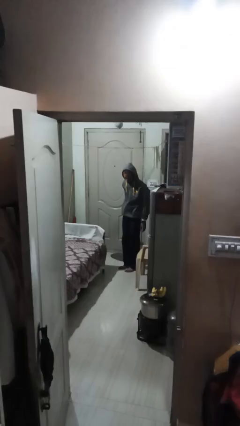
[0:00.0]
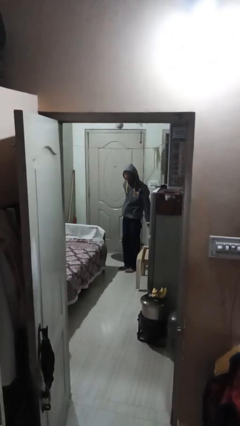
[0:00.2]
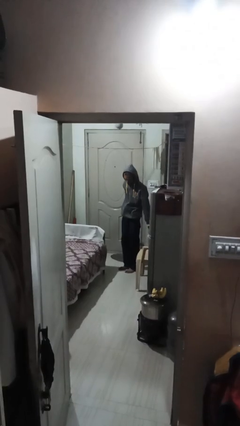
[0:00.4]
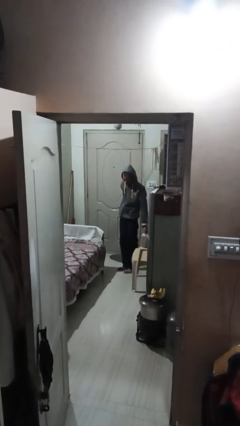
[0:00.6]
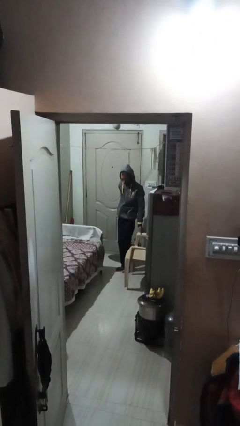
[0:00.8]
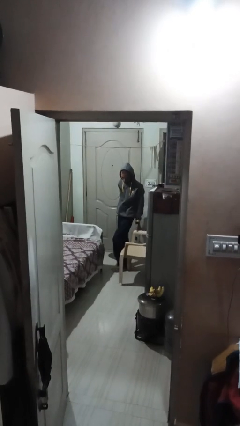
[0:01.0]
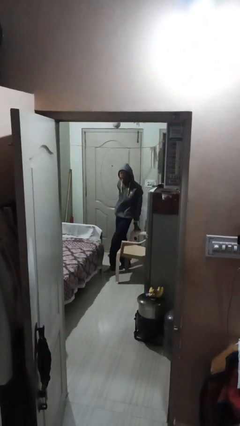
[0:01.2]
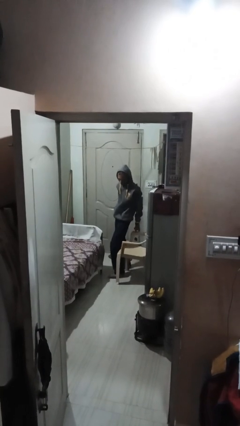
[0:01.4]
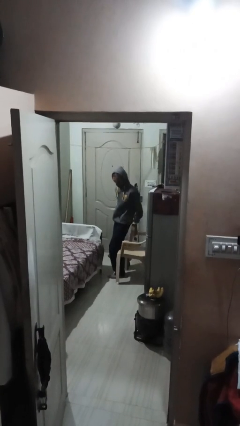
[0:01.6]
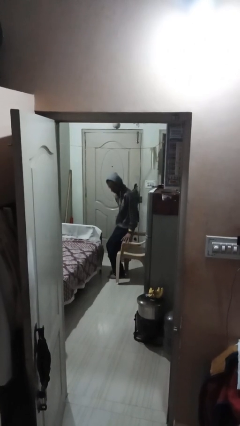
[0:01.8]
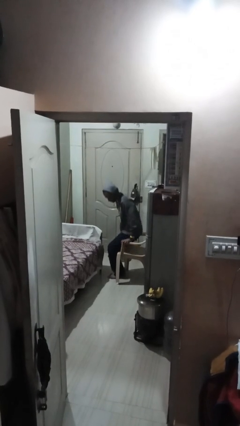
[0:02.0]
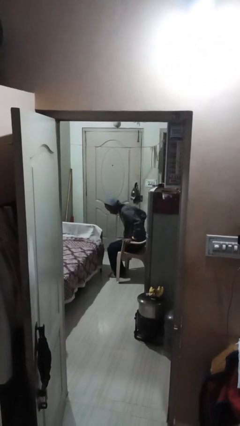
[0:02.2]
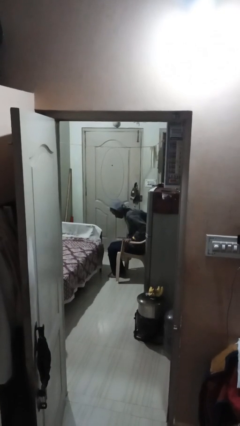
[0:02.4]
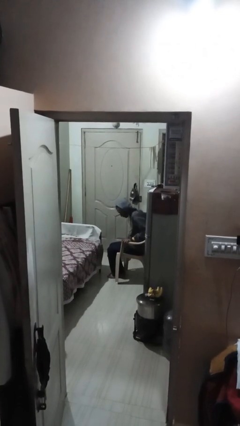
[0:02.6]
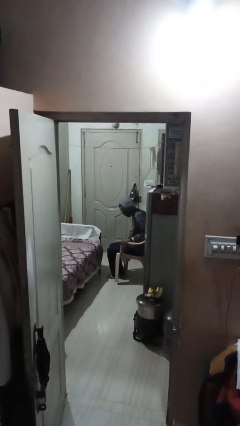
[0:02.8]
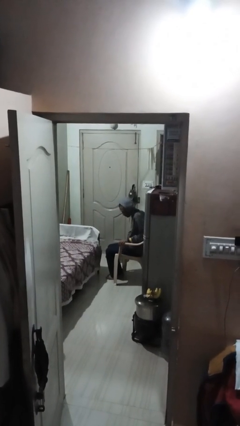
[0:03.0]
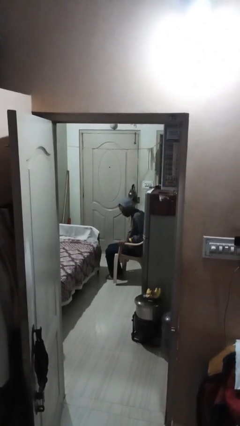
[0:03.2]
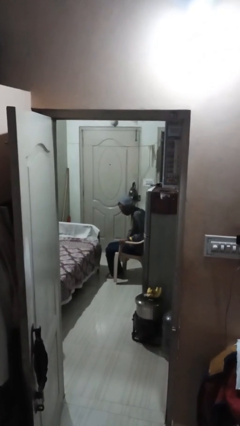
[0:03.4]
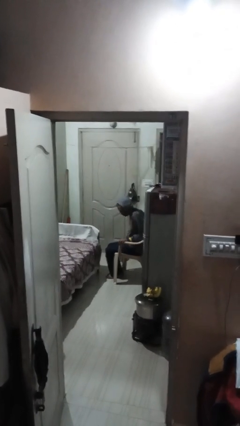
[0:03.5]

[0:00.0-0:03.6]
person sits down

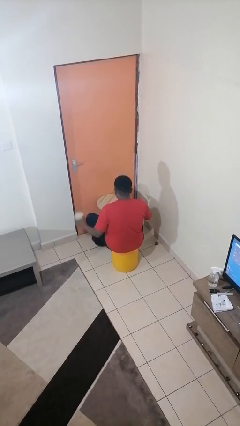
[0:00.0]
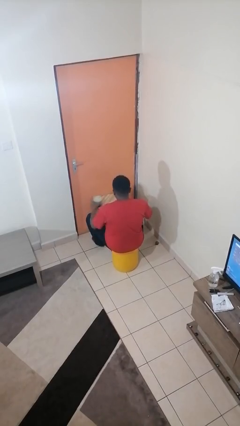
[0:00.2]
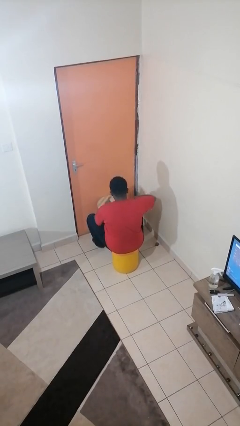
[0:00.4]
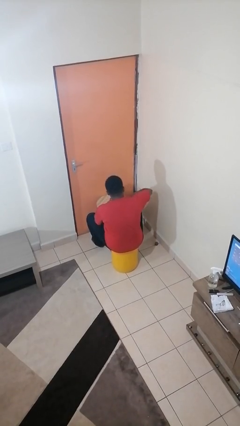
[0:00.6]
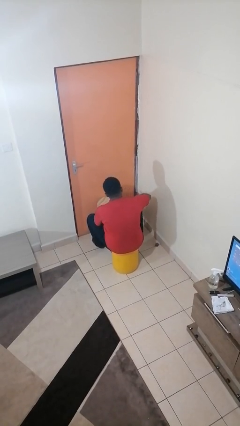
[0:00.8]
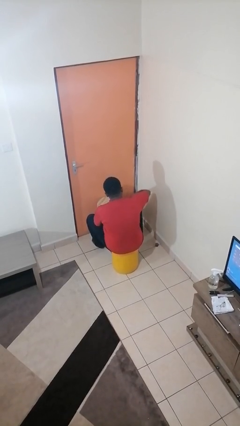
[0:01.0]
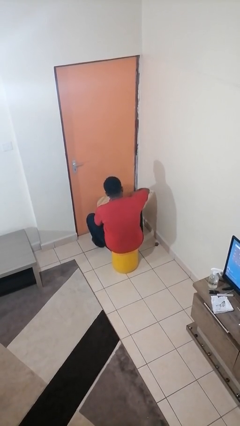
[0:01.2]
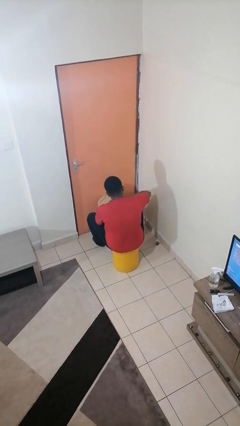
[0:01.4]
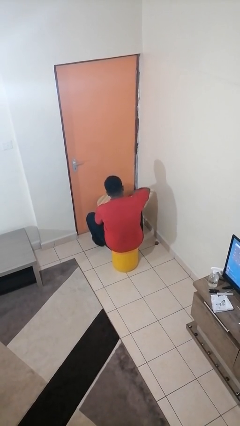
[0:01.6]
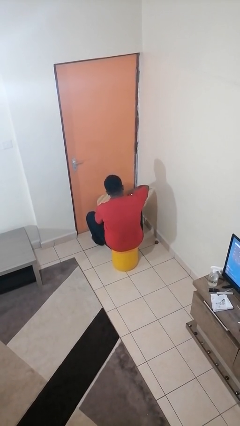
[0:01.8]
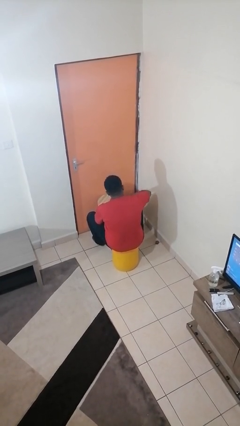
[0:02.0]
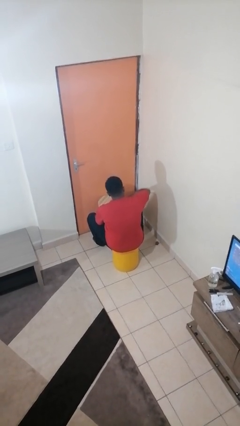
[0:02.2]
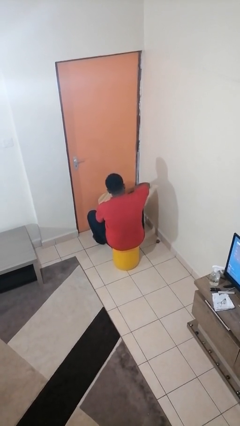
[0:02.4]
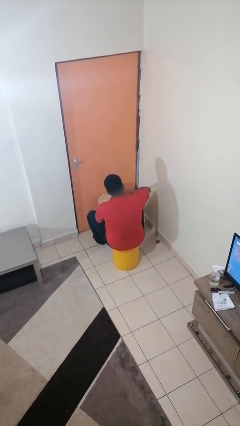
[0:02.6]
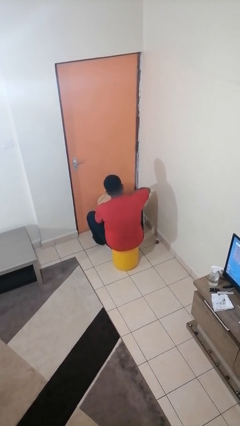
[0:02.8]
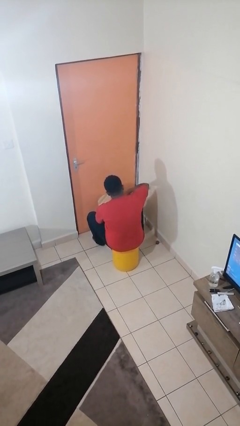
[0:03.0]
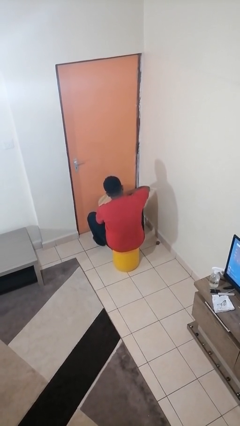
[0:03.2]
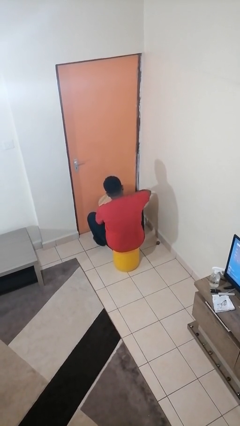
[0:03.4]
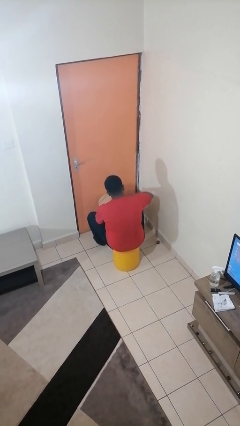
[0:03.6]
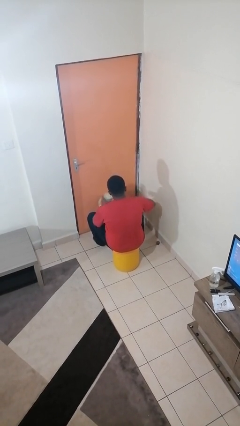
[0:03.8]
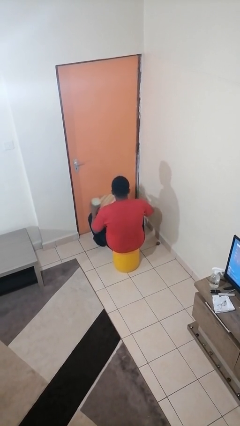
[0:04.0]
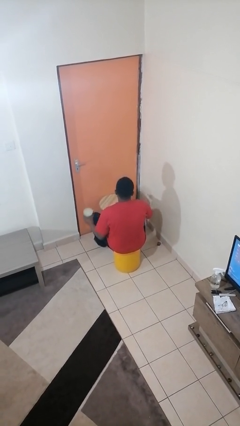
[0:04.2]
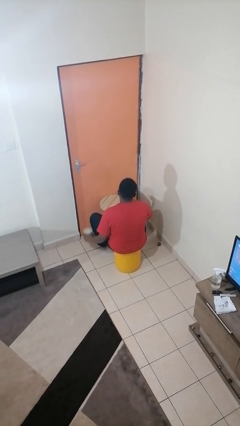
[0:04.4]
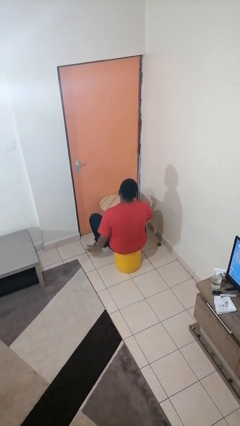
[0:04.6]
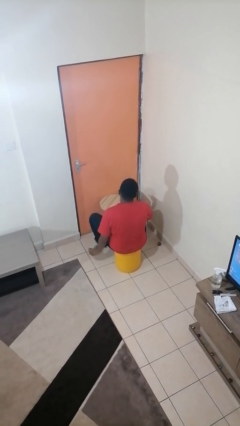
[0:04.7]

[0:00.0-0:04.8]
person opens can with can opener

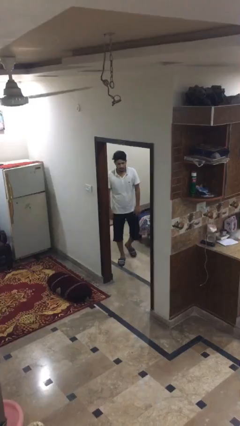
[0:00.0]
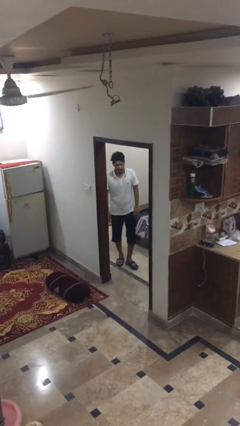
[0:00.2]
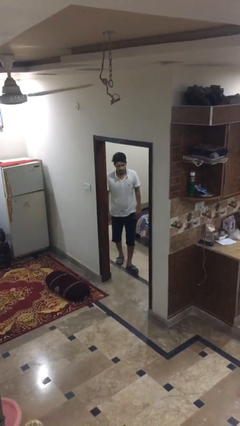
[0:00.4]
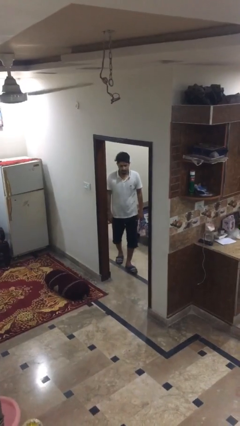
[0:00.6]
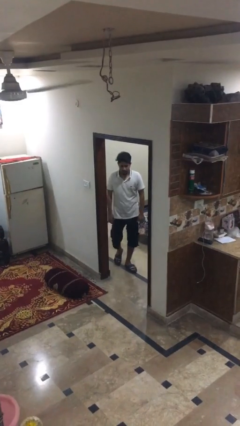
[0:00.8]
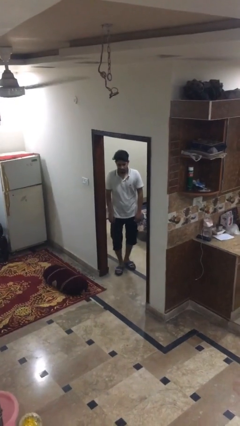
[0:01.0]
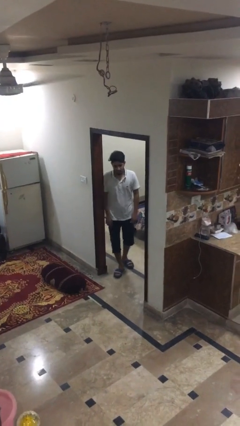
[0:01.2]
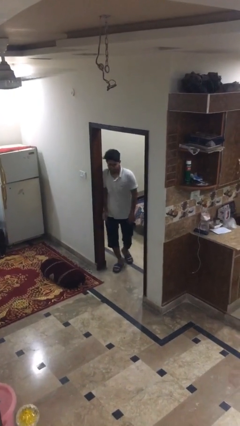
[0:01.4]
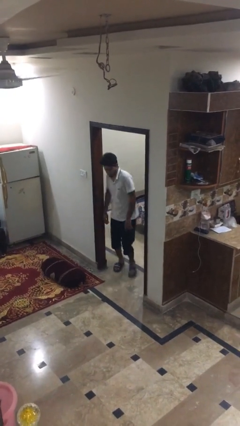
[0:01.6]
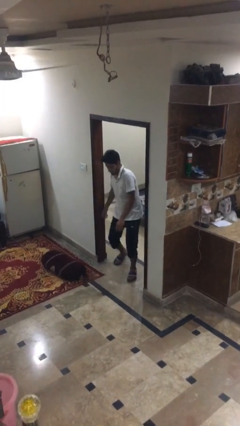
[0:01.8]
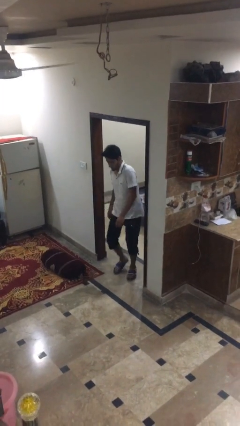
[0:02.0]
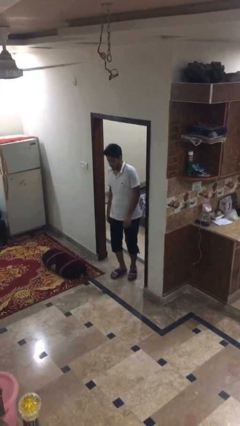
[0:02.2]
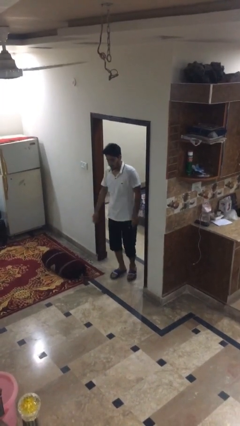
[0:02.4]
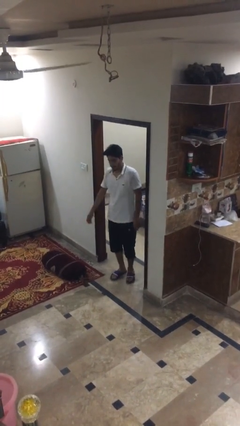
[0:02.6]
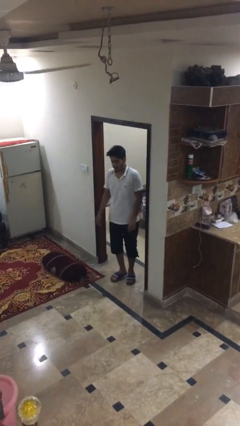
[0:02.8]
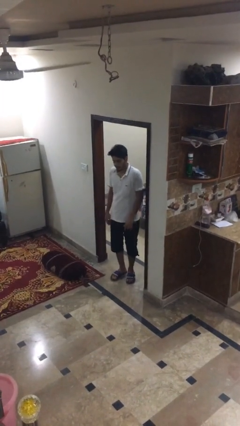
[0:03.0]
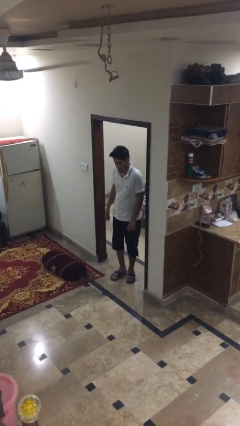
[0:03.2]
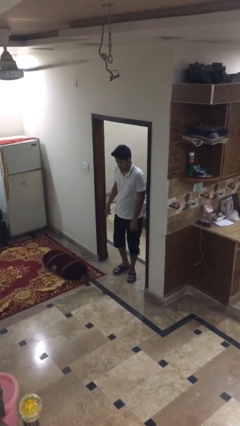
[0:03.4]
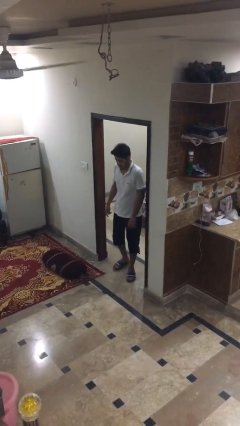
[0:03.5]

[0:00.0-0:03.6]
person bumps into wall

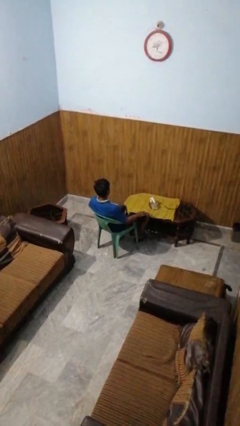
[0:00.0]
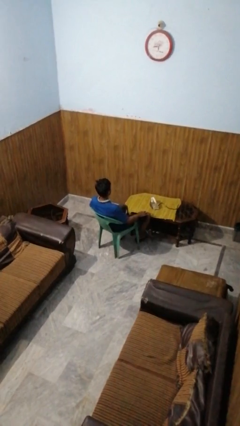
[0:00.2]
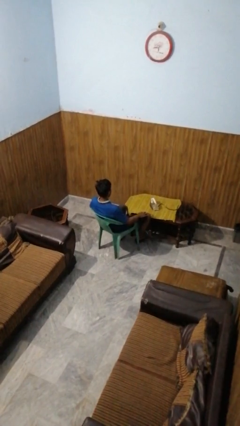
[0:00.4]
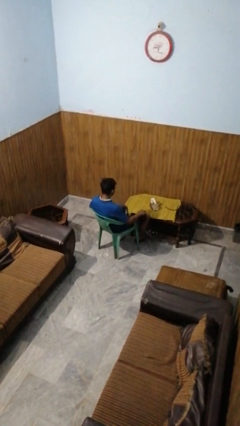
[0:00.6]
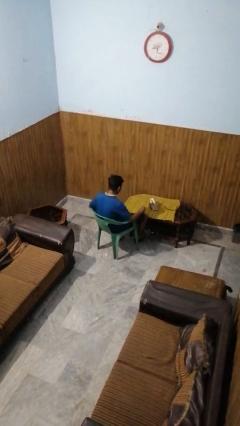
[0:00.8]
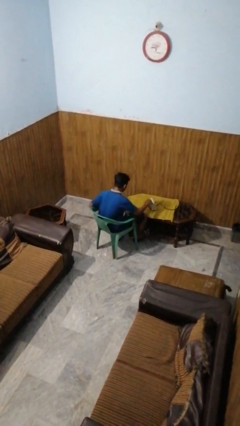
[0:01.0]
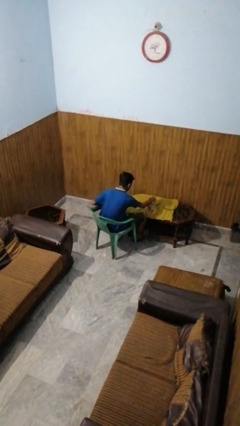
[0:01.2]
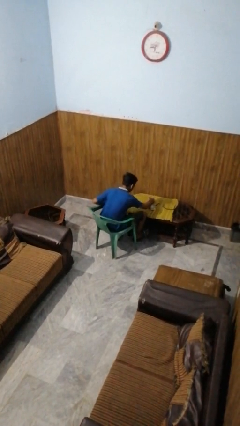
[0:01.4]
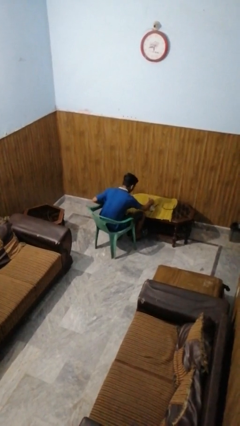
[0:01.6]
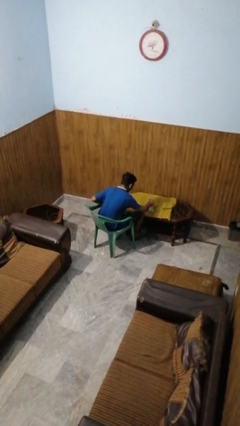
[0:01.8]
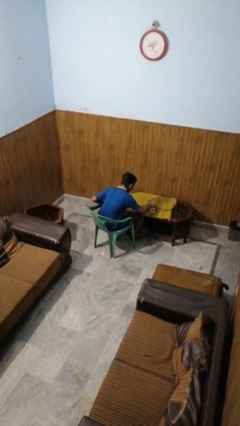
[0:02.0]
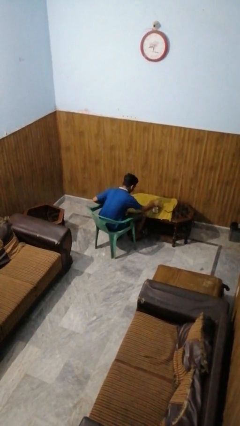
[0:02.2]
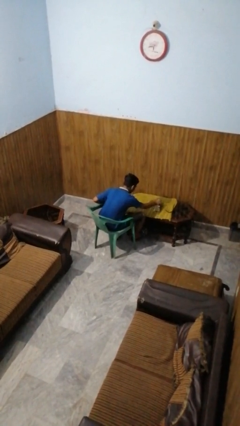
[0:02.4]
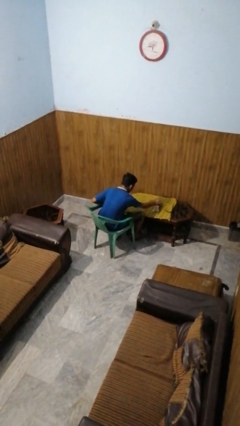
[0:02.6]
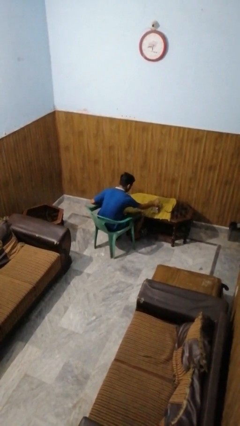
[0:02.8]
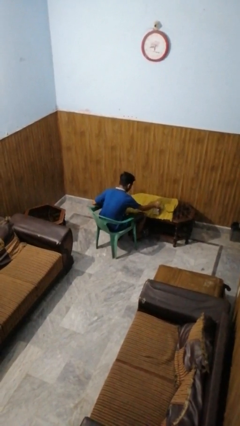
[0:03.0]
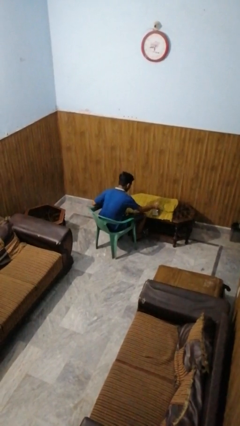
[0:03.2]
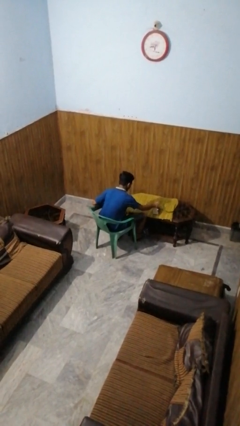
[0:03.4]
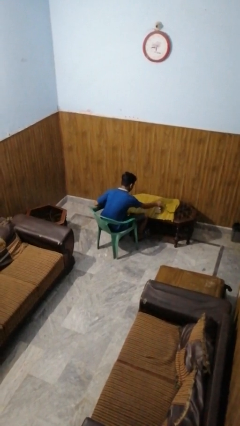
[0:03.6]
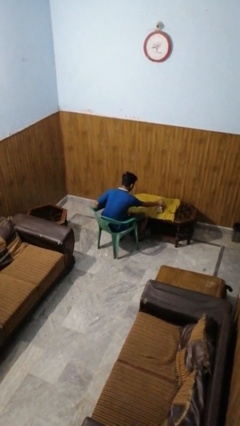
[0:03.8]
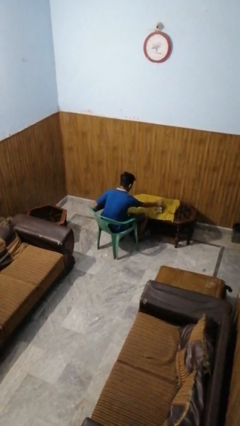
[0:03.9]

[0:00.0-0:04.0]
person irons clothes

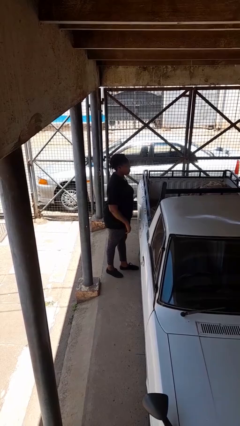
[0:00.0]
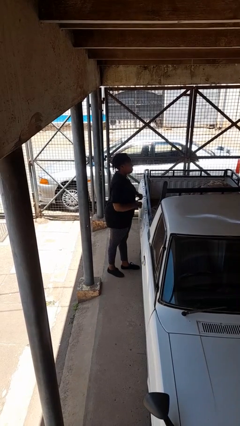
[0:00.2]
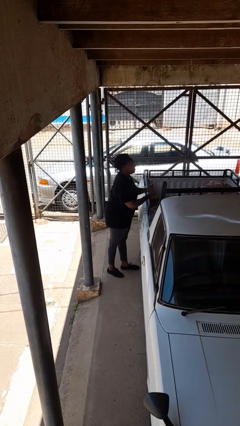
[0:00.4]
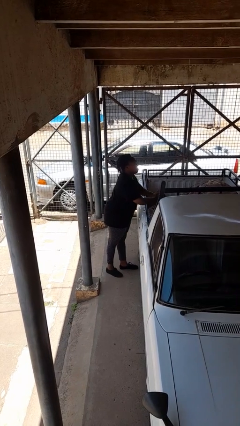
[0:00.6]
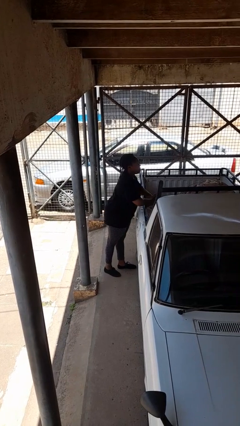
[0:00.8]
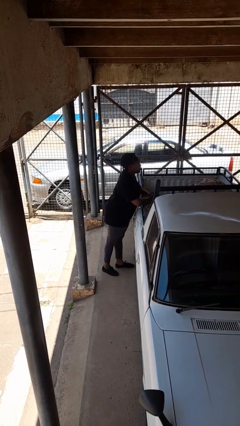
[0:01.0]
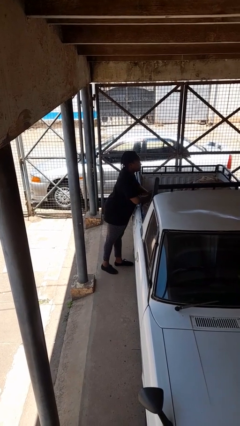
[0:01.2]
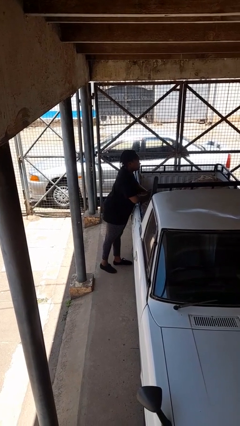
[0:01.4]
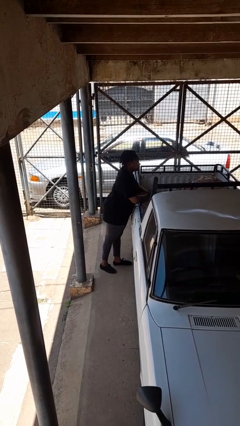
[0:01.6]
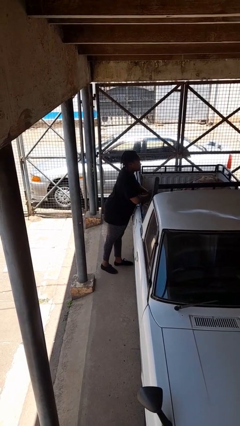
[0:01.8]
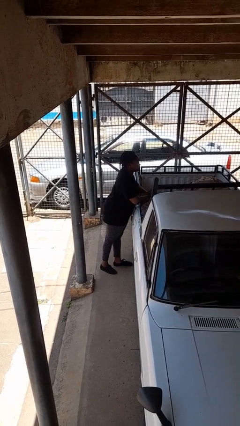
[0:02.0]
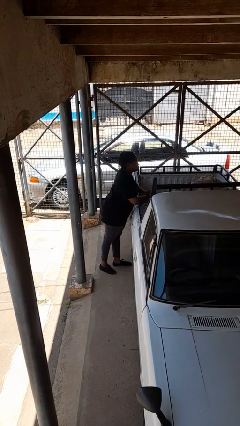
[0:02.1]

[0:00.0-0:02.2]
person leans against car
